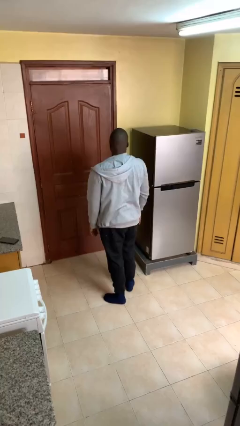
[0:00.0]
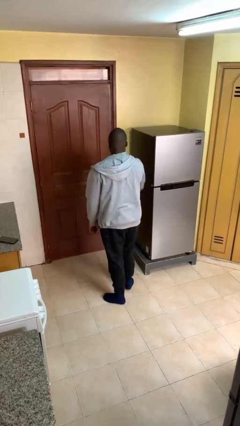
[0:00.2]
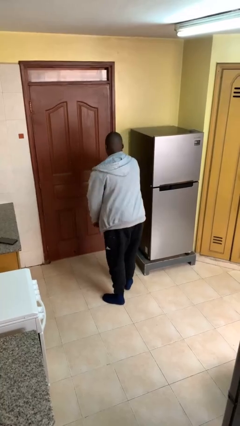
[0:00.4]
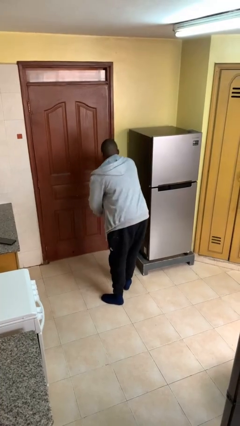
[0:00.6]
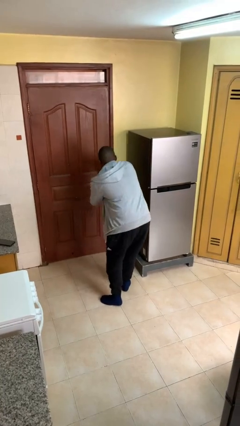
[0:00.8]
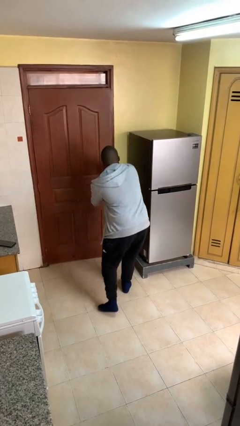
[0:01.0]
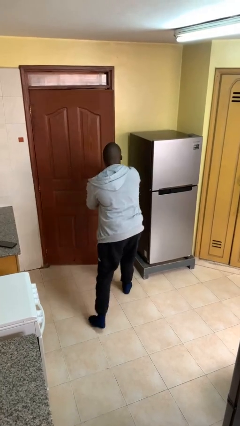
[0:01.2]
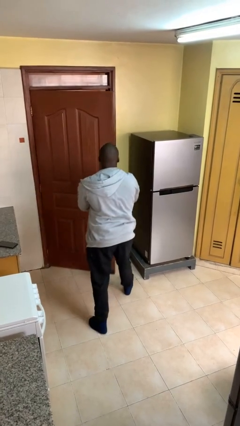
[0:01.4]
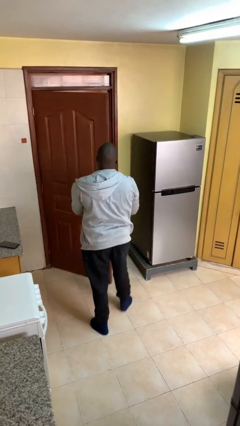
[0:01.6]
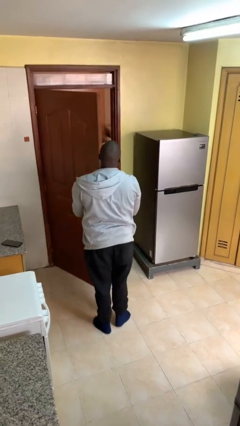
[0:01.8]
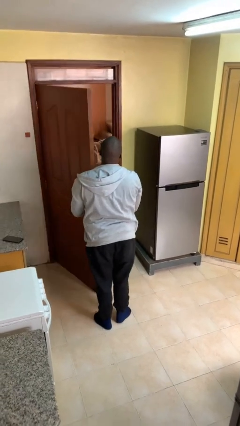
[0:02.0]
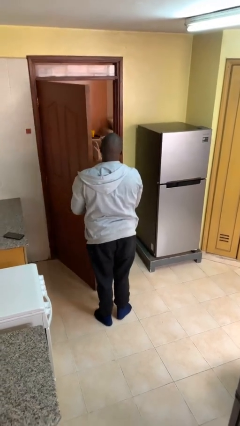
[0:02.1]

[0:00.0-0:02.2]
person opens facility door

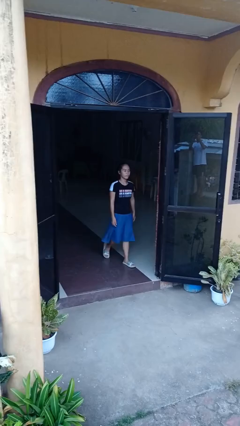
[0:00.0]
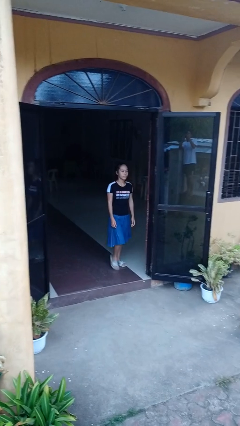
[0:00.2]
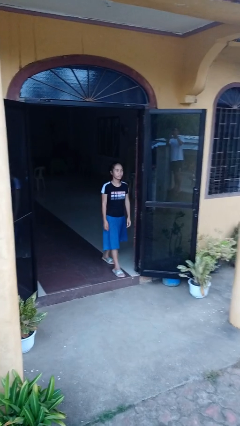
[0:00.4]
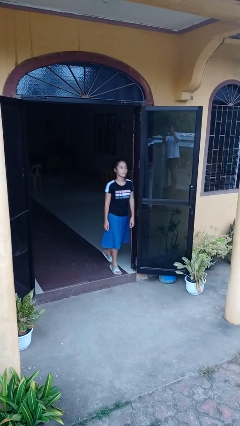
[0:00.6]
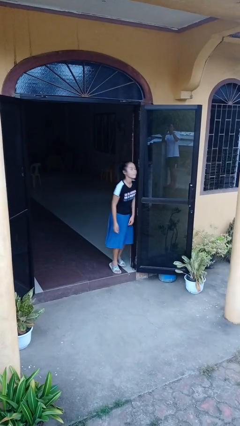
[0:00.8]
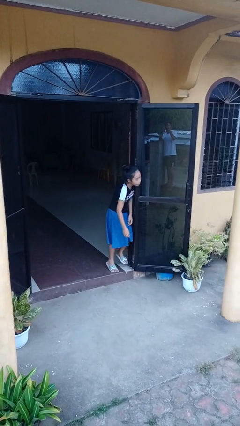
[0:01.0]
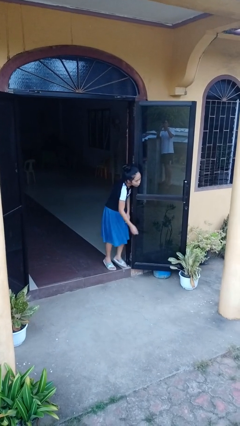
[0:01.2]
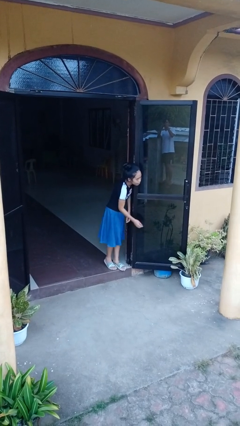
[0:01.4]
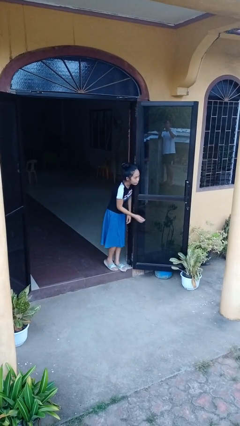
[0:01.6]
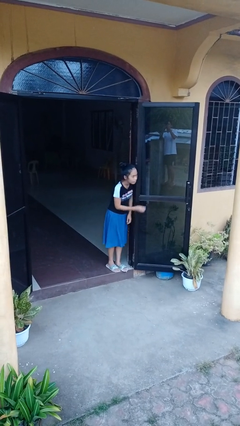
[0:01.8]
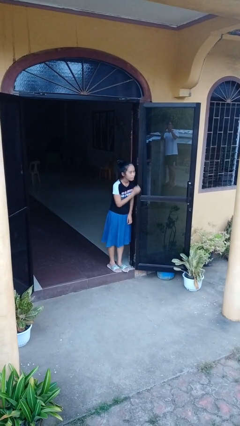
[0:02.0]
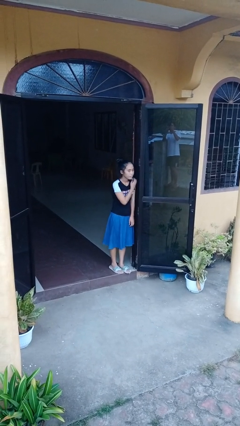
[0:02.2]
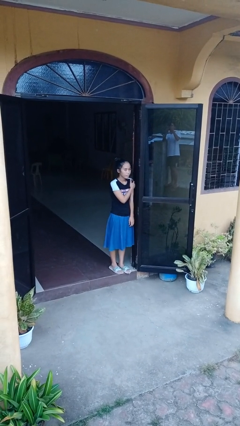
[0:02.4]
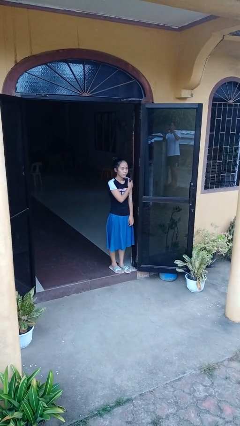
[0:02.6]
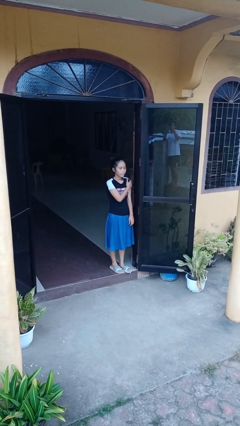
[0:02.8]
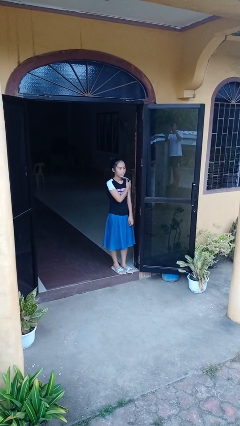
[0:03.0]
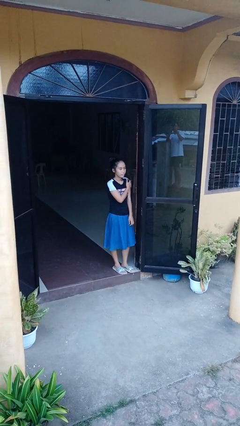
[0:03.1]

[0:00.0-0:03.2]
person bumps into wall

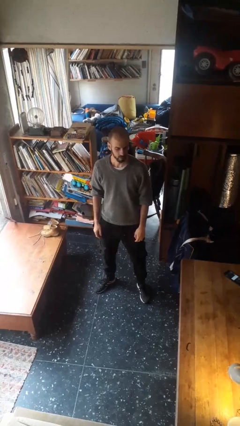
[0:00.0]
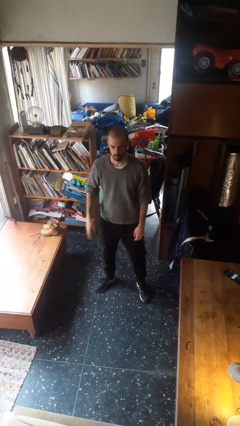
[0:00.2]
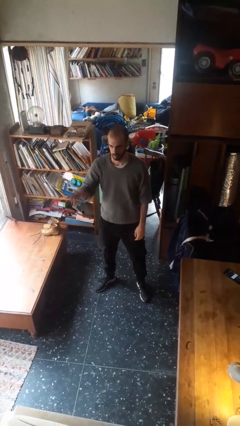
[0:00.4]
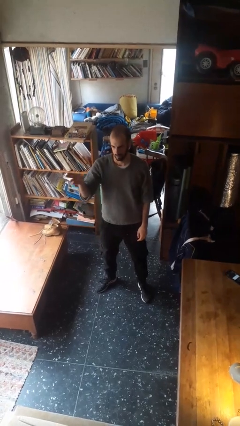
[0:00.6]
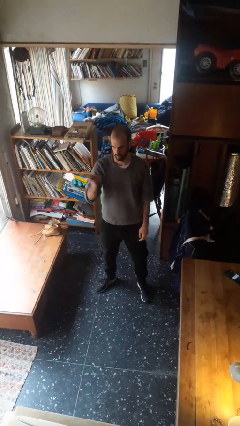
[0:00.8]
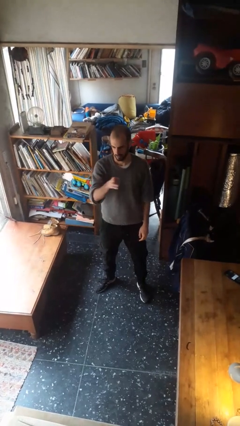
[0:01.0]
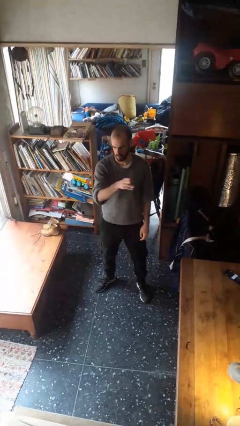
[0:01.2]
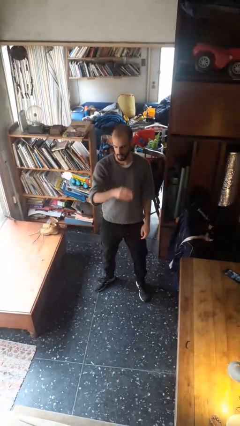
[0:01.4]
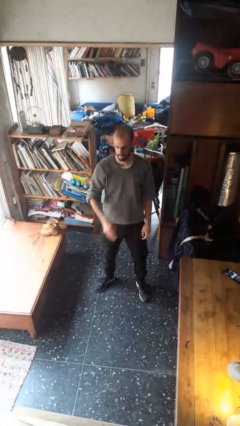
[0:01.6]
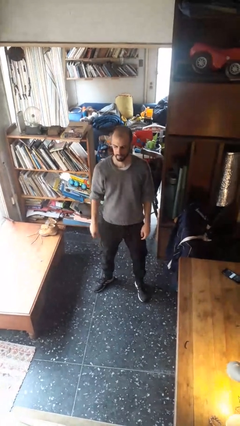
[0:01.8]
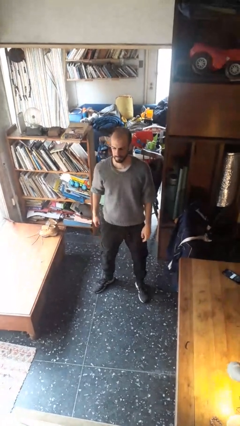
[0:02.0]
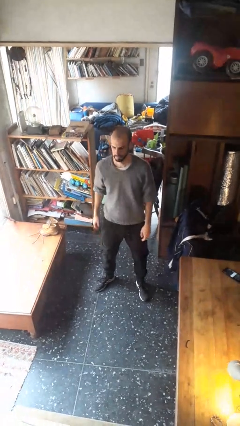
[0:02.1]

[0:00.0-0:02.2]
person gestures swipe left

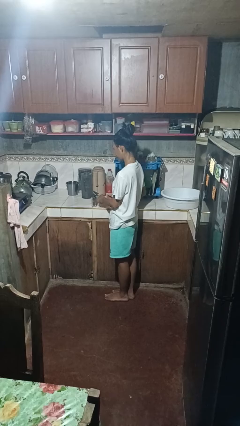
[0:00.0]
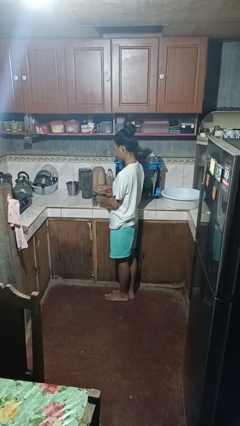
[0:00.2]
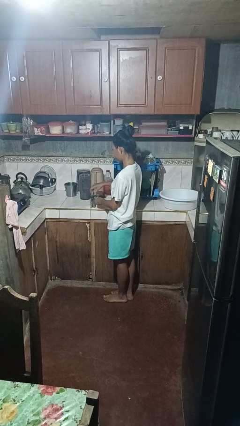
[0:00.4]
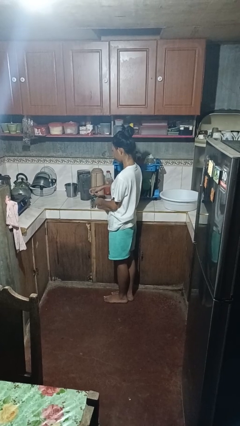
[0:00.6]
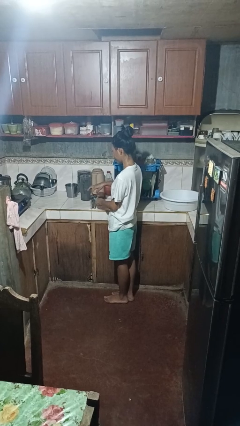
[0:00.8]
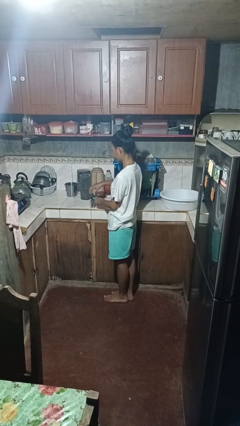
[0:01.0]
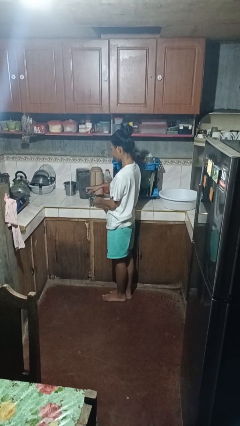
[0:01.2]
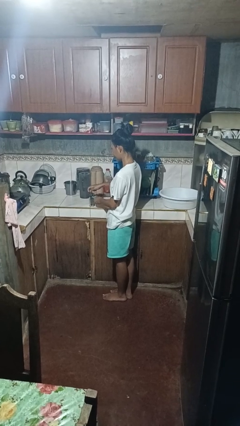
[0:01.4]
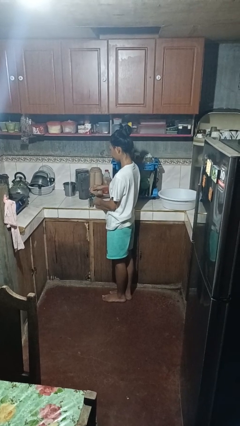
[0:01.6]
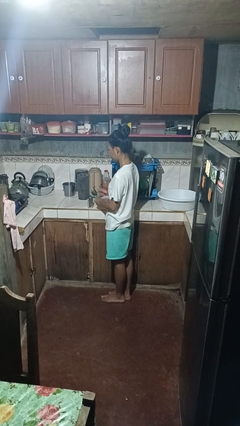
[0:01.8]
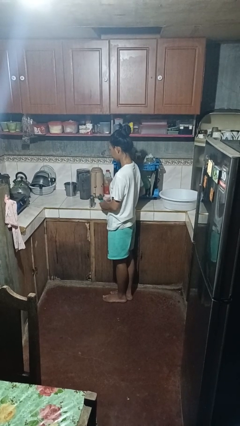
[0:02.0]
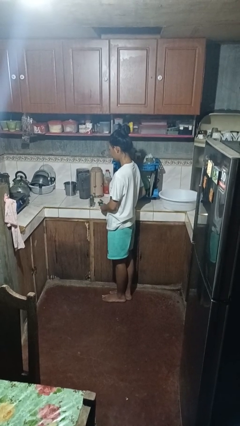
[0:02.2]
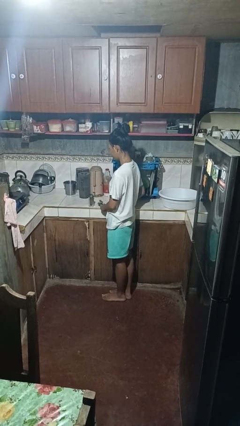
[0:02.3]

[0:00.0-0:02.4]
person opens can with can opener

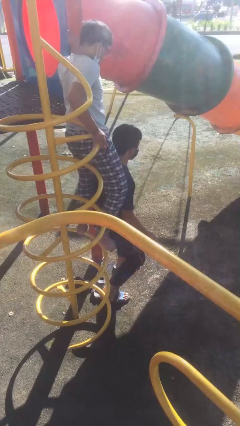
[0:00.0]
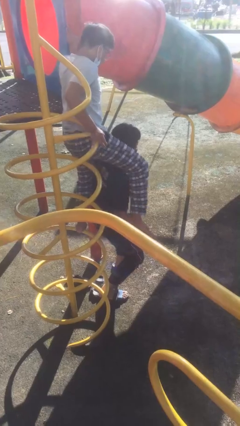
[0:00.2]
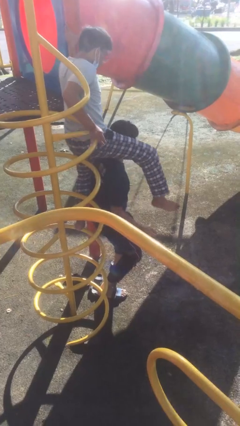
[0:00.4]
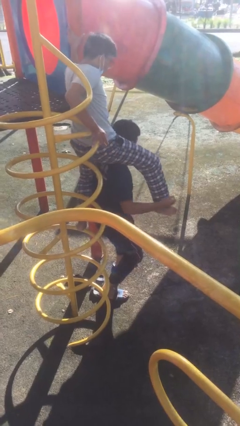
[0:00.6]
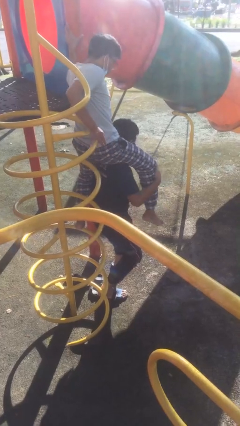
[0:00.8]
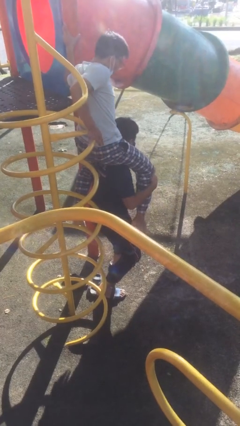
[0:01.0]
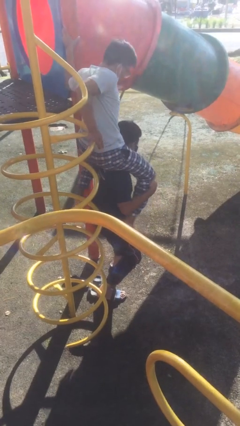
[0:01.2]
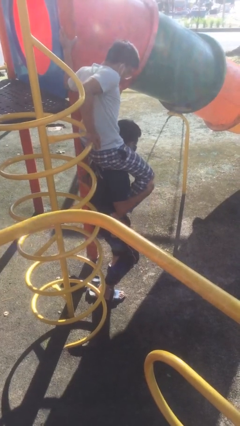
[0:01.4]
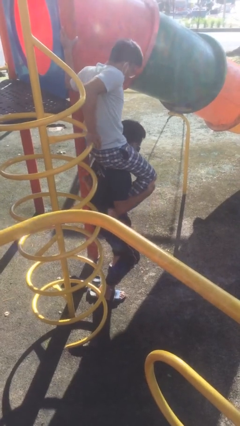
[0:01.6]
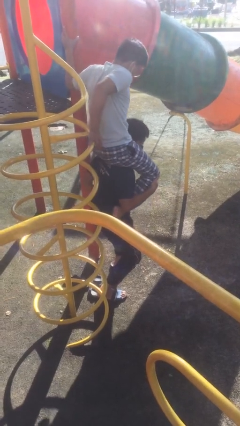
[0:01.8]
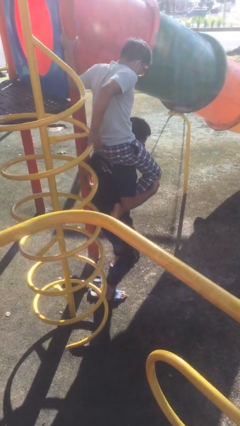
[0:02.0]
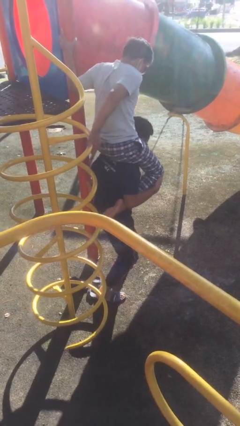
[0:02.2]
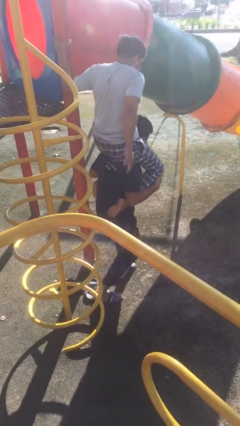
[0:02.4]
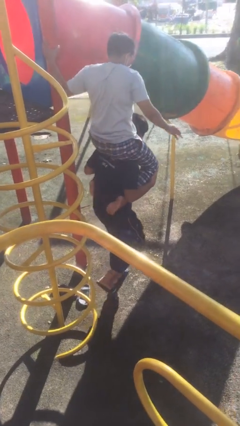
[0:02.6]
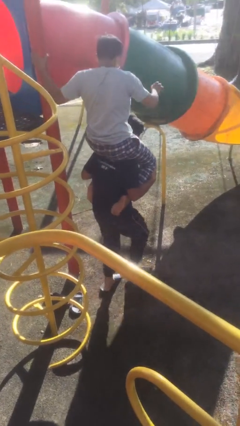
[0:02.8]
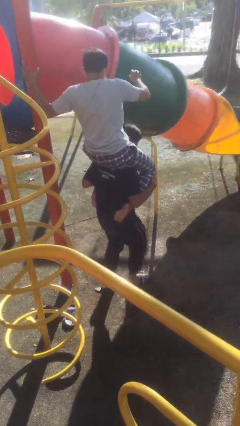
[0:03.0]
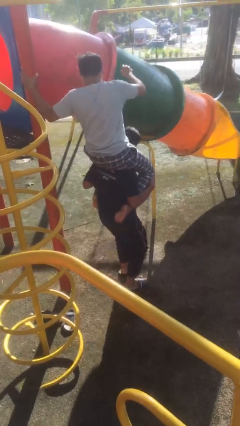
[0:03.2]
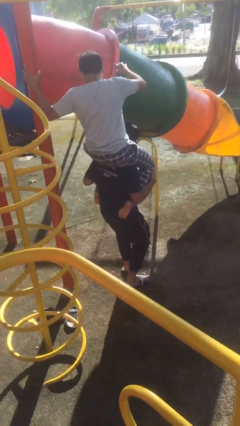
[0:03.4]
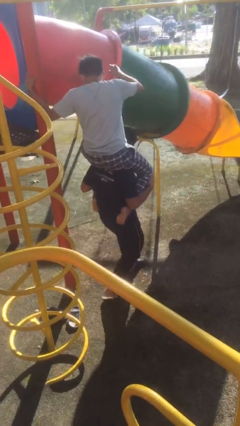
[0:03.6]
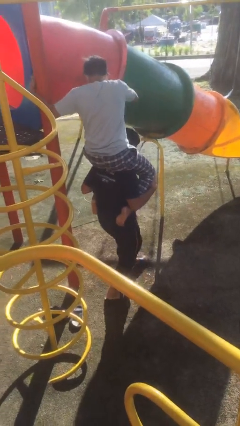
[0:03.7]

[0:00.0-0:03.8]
person carries person on shoulders

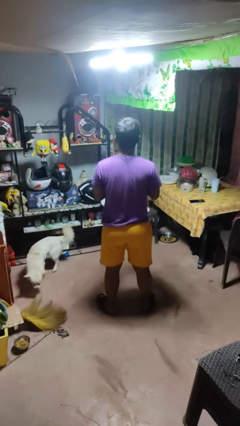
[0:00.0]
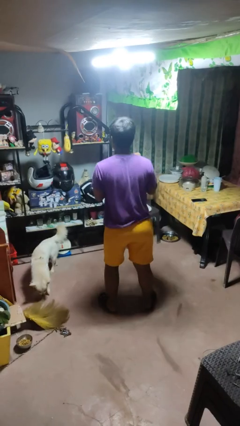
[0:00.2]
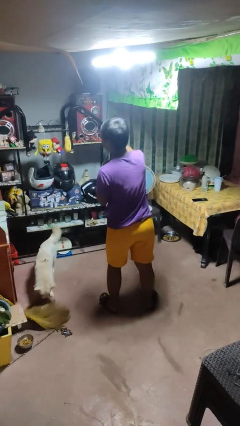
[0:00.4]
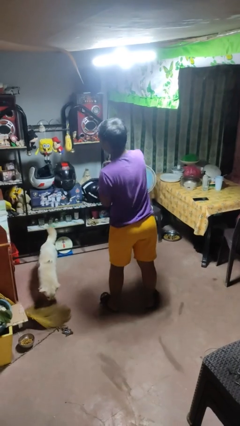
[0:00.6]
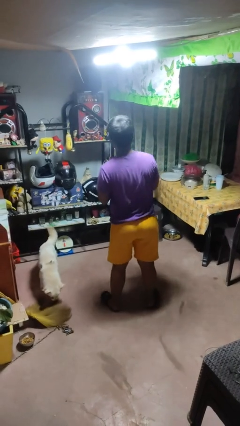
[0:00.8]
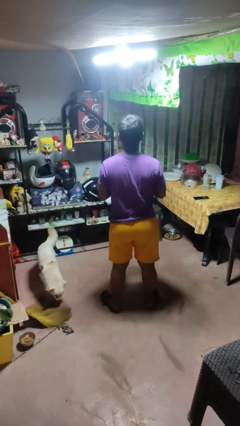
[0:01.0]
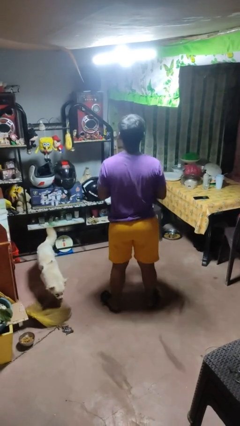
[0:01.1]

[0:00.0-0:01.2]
person punches

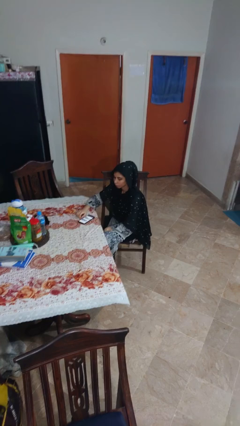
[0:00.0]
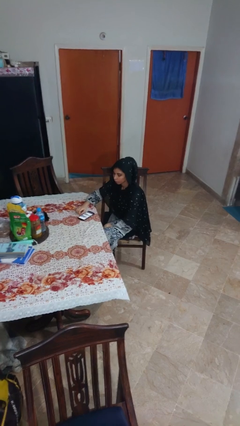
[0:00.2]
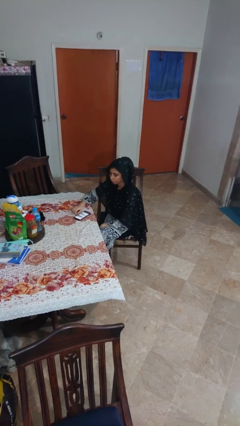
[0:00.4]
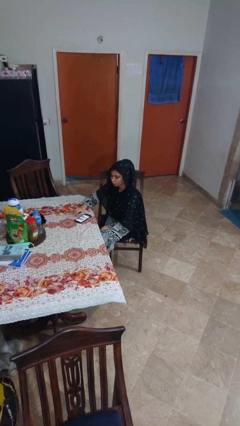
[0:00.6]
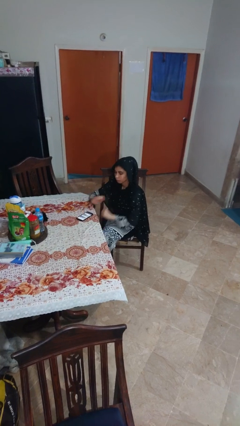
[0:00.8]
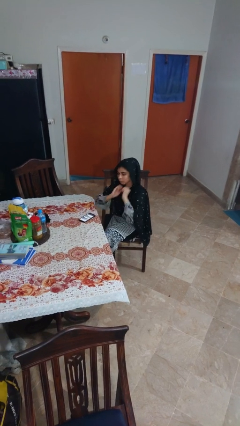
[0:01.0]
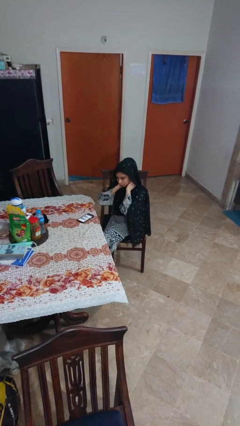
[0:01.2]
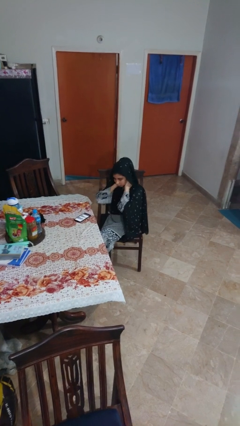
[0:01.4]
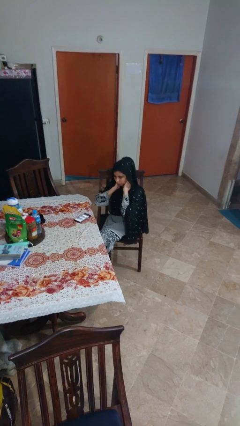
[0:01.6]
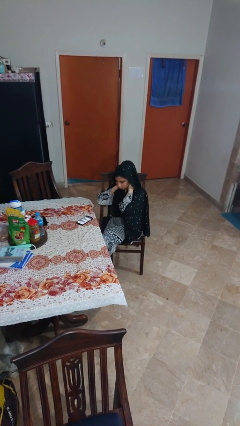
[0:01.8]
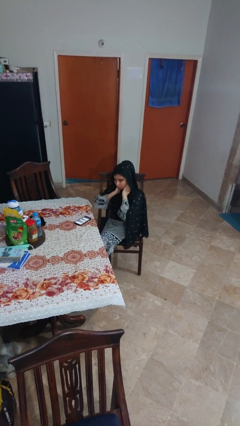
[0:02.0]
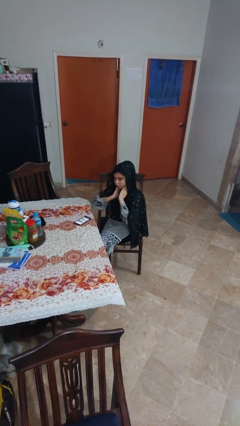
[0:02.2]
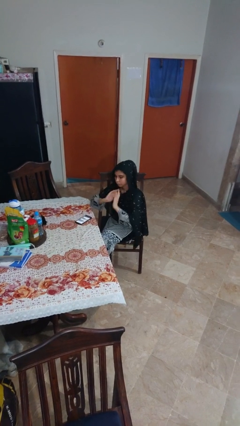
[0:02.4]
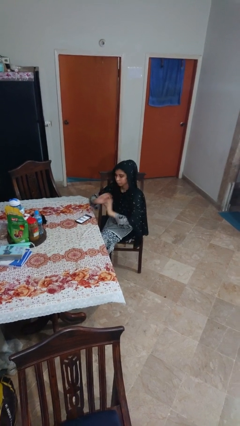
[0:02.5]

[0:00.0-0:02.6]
person rubs neck
